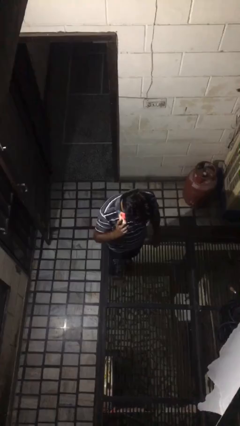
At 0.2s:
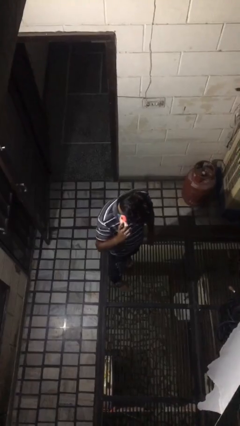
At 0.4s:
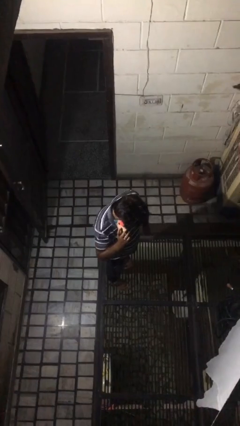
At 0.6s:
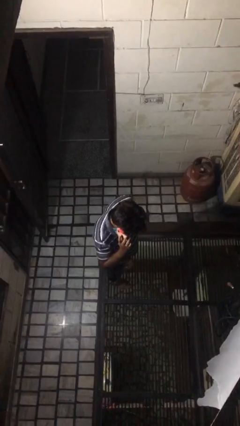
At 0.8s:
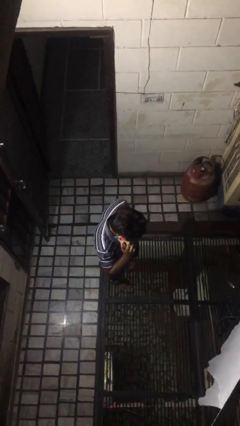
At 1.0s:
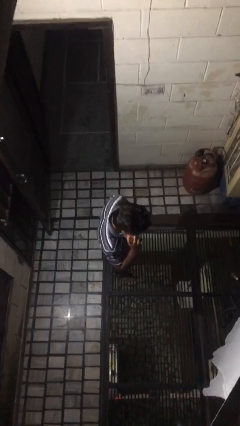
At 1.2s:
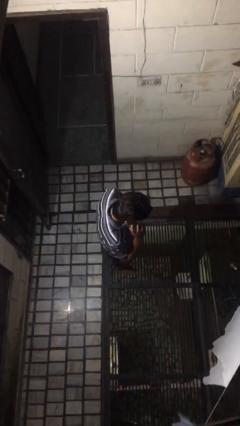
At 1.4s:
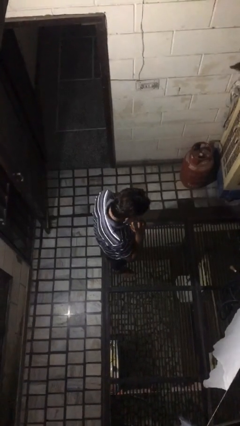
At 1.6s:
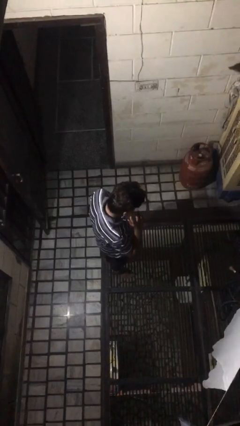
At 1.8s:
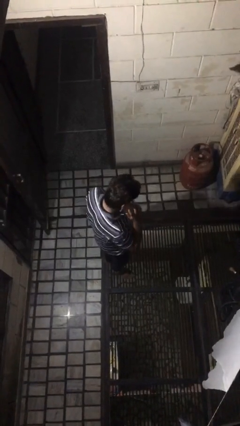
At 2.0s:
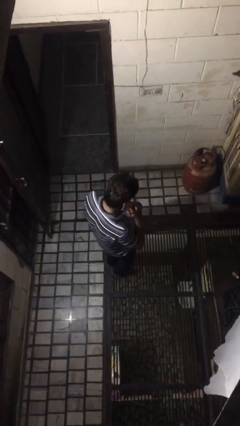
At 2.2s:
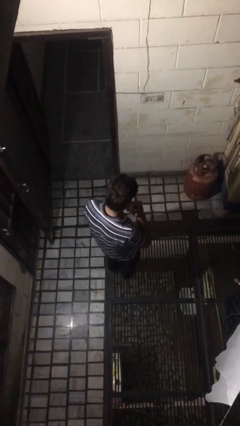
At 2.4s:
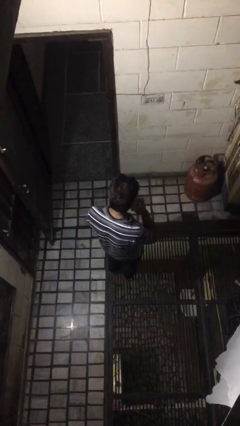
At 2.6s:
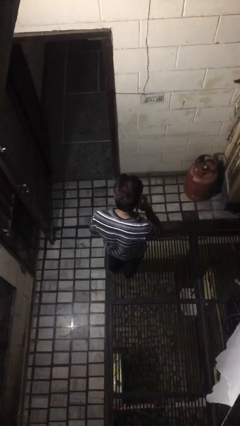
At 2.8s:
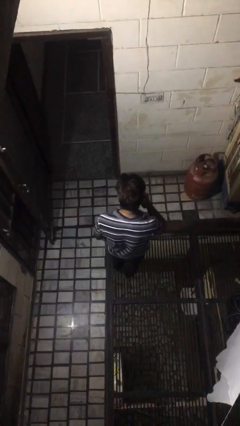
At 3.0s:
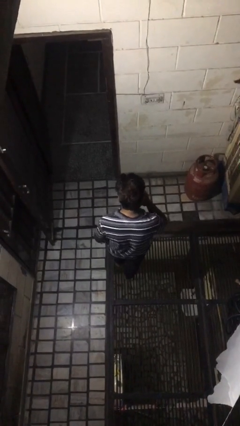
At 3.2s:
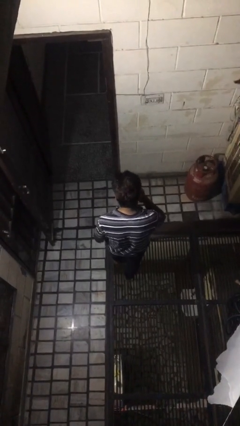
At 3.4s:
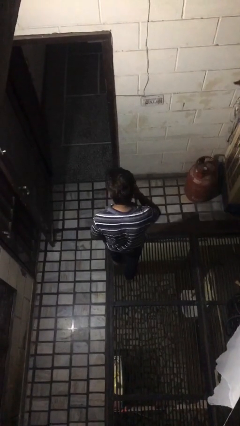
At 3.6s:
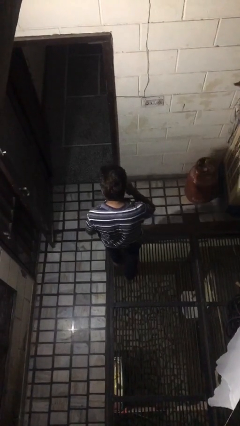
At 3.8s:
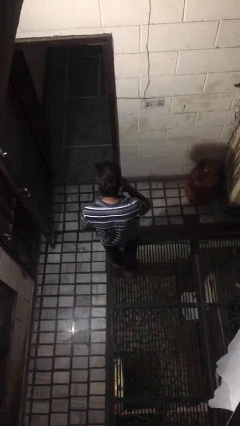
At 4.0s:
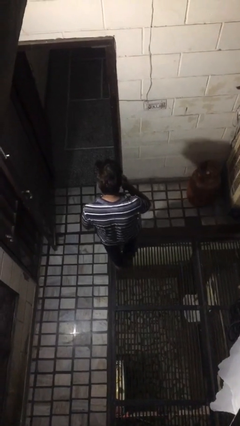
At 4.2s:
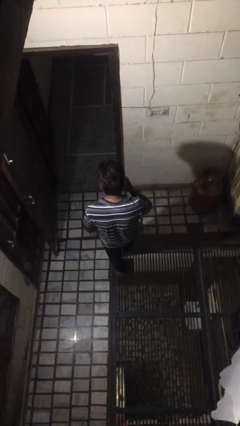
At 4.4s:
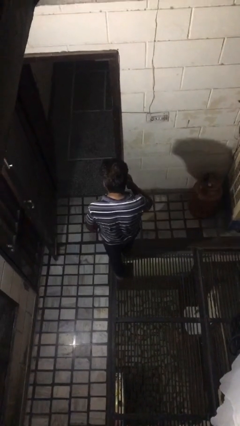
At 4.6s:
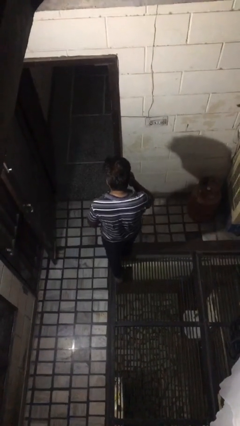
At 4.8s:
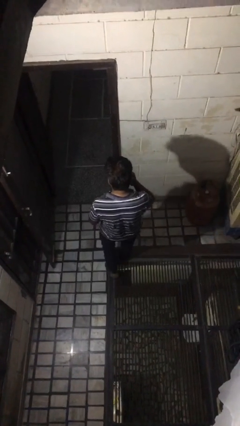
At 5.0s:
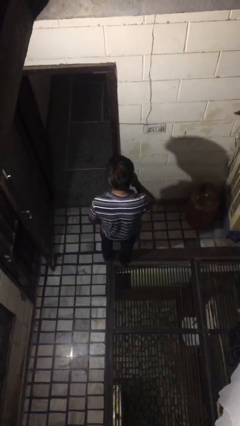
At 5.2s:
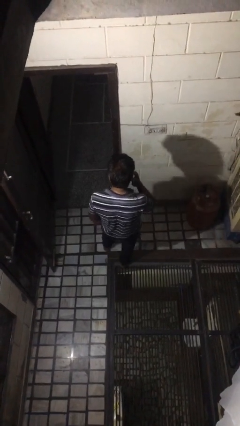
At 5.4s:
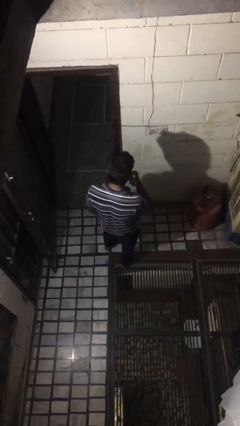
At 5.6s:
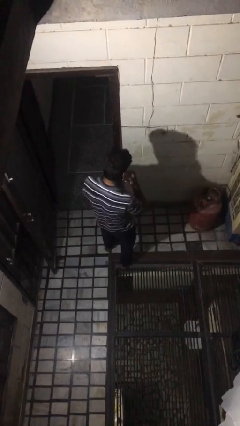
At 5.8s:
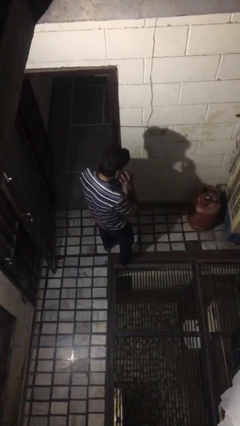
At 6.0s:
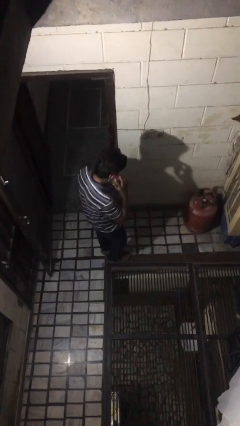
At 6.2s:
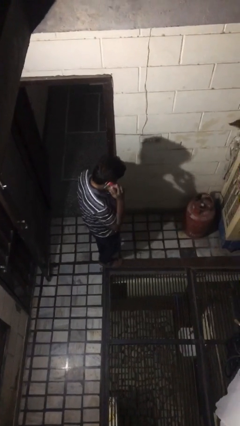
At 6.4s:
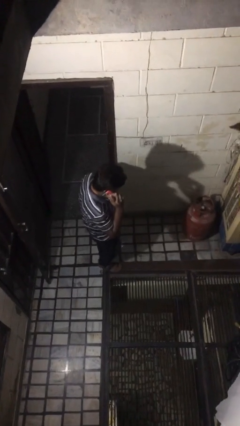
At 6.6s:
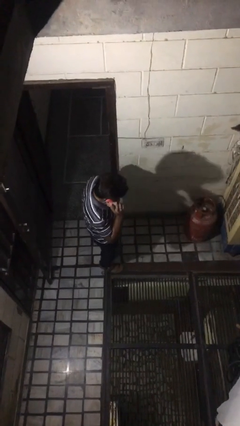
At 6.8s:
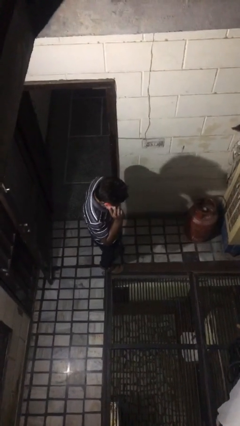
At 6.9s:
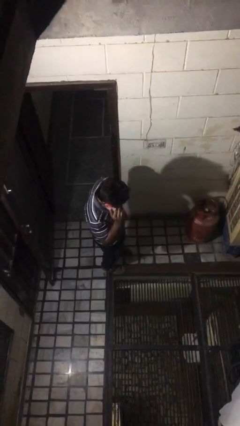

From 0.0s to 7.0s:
person talks on phone

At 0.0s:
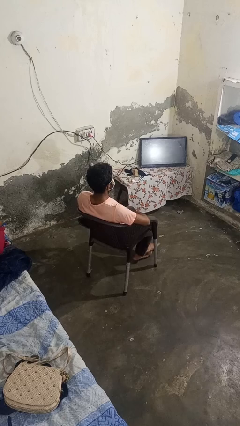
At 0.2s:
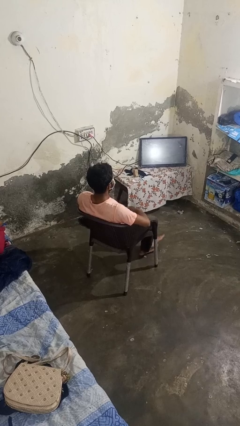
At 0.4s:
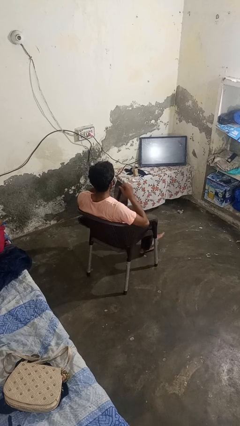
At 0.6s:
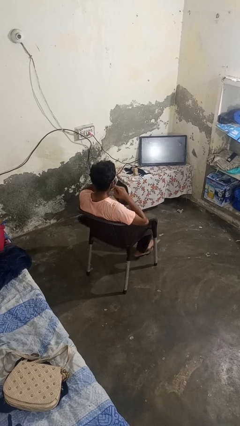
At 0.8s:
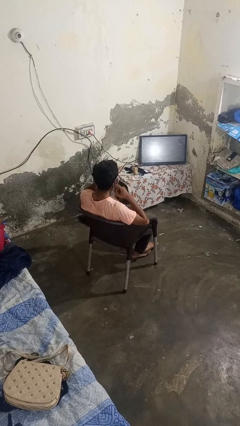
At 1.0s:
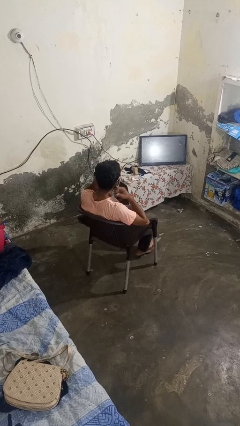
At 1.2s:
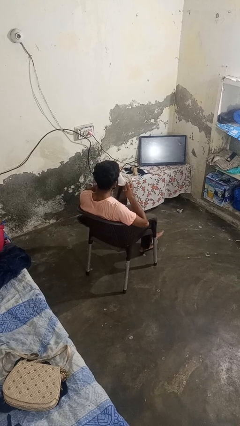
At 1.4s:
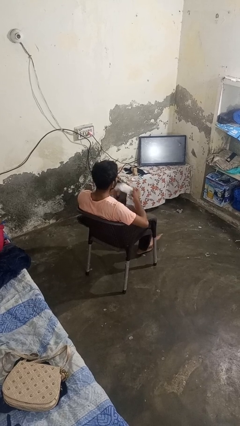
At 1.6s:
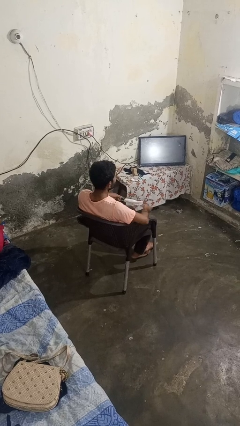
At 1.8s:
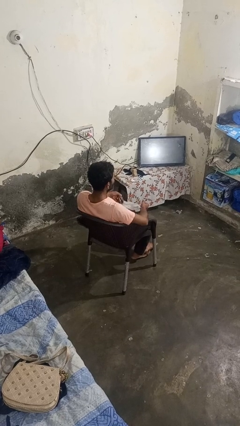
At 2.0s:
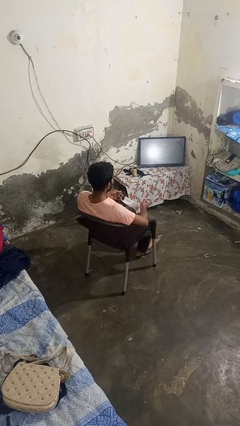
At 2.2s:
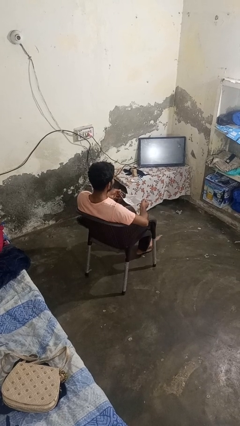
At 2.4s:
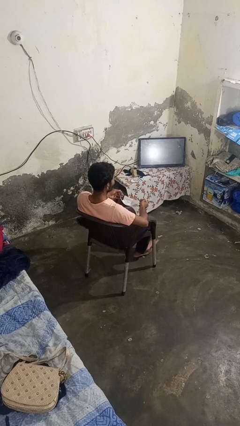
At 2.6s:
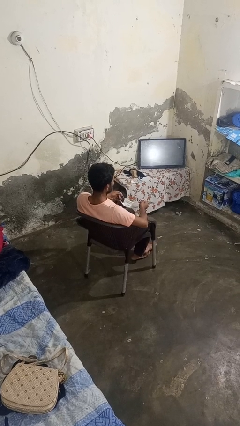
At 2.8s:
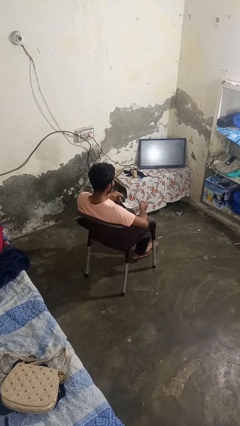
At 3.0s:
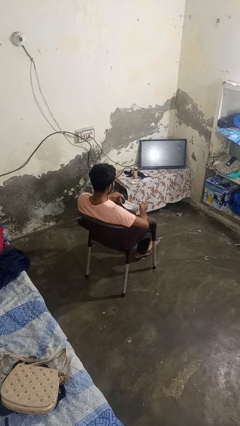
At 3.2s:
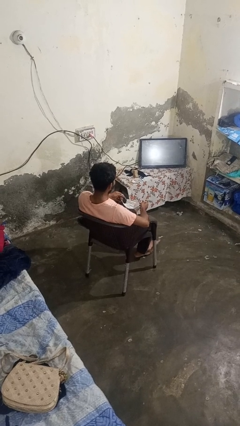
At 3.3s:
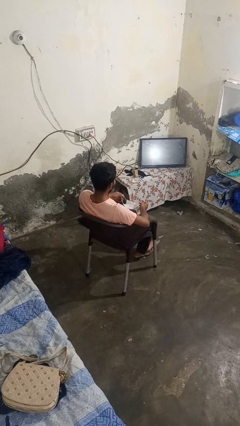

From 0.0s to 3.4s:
person takes off facemask

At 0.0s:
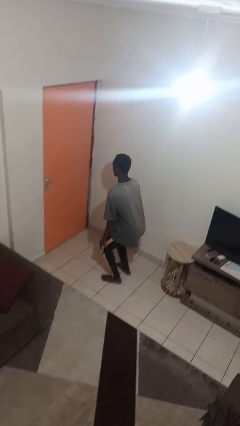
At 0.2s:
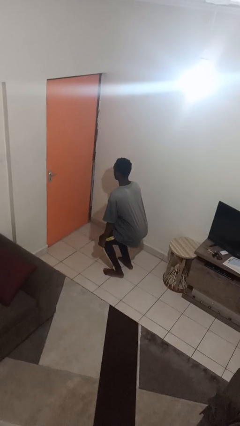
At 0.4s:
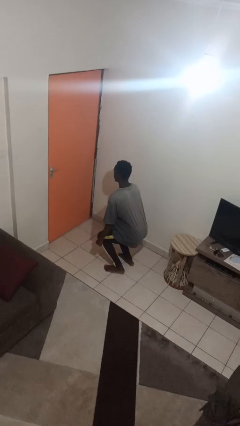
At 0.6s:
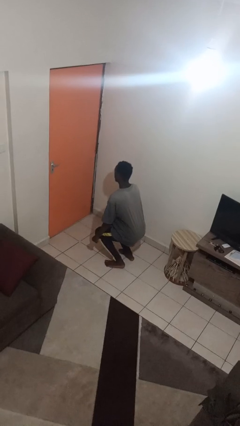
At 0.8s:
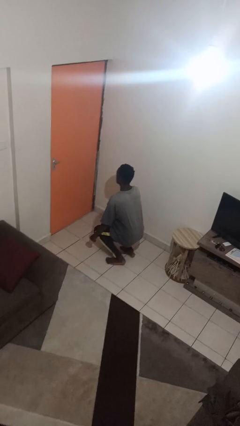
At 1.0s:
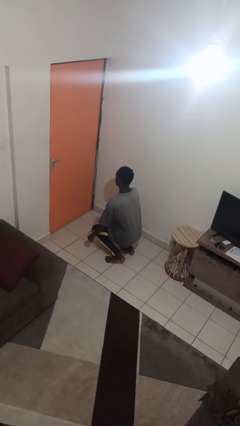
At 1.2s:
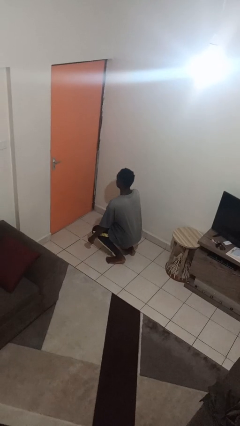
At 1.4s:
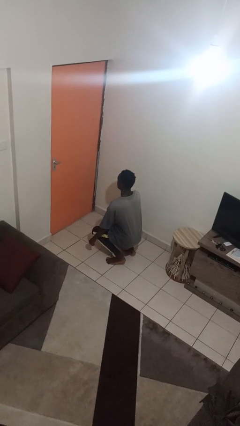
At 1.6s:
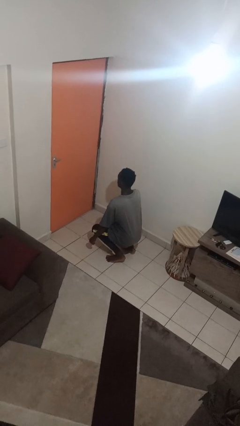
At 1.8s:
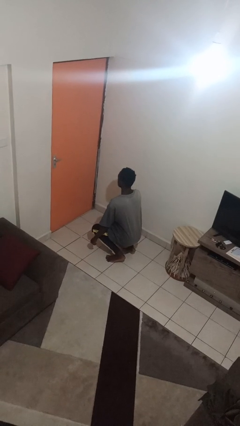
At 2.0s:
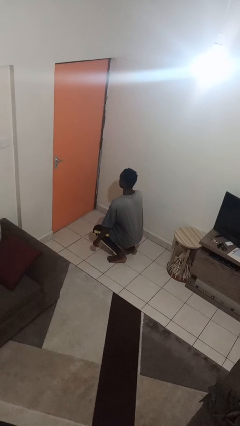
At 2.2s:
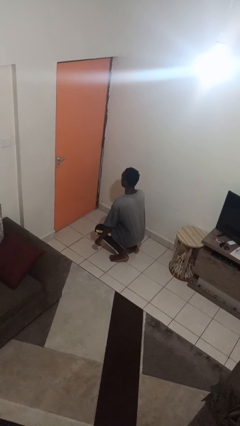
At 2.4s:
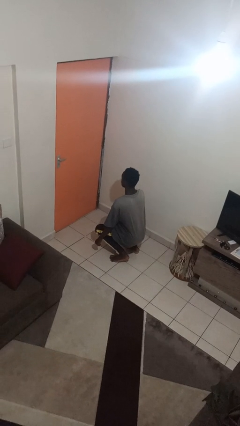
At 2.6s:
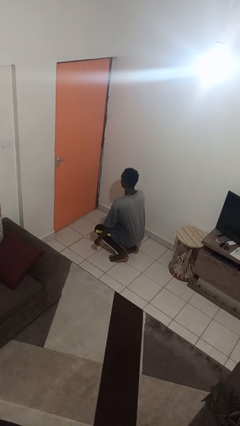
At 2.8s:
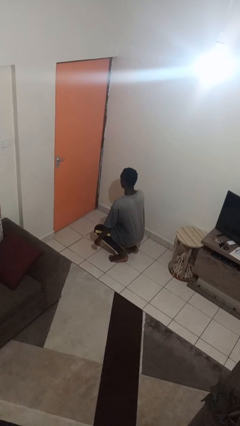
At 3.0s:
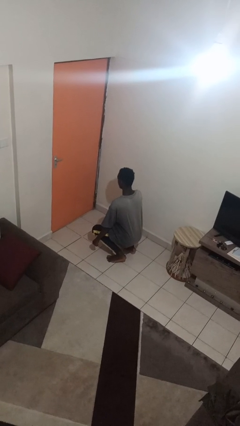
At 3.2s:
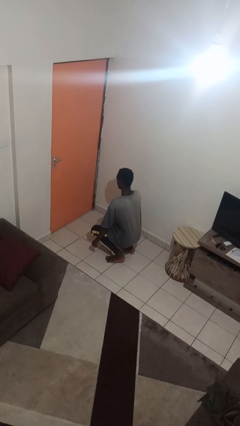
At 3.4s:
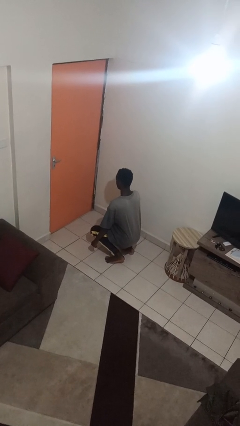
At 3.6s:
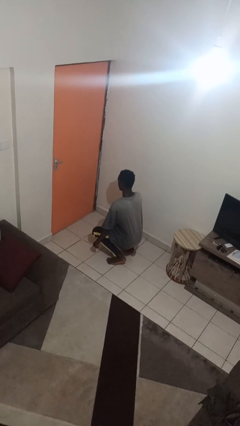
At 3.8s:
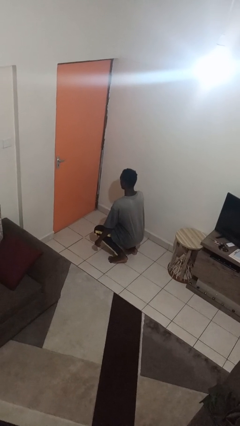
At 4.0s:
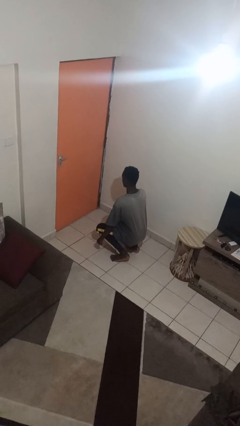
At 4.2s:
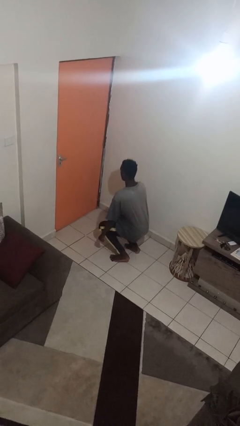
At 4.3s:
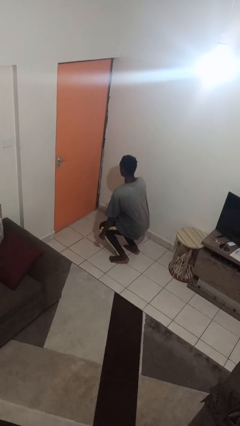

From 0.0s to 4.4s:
person squats

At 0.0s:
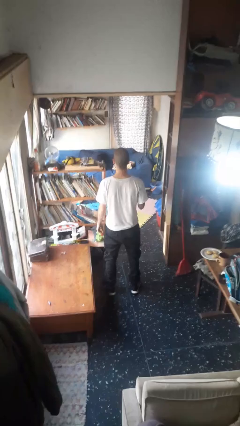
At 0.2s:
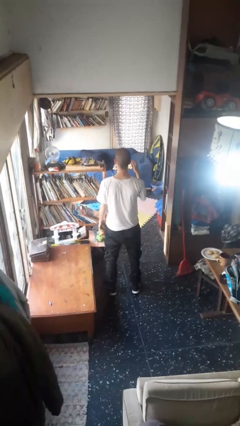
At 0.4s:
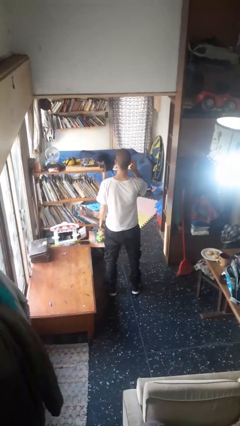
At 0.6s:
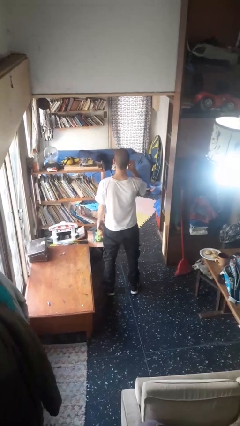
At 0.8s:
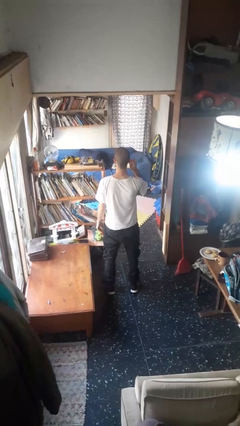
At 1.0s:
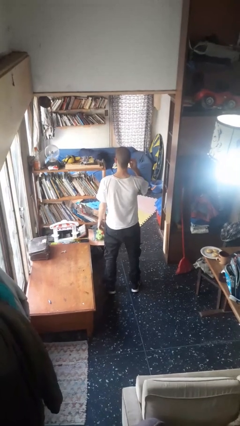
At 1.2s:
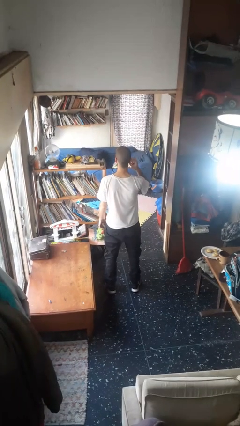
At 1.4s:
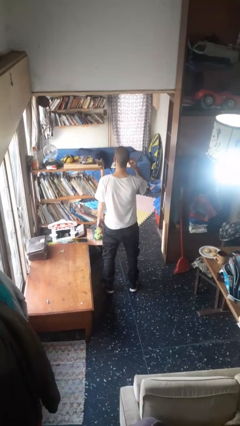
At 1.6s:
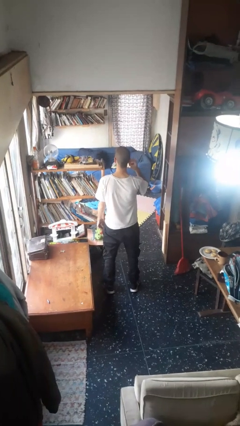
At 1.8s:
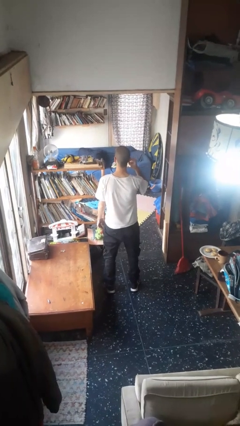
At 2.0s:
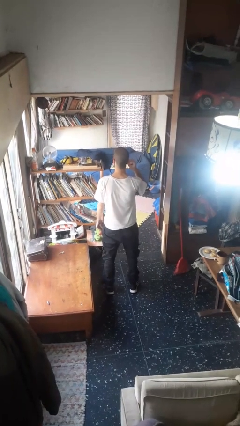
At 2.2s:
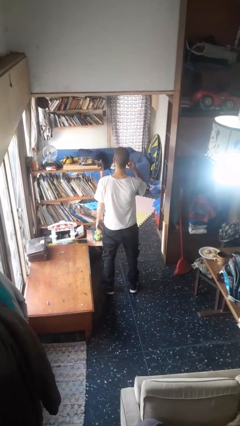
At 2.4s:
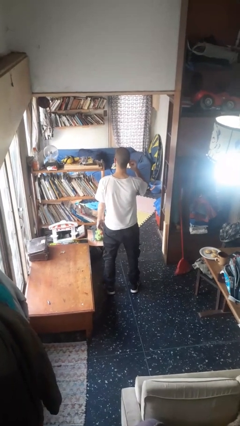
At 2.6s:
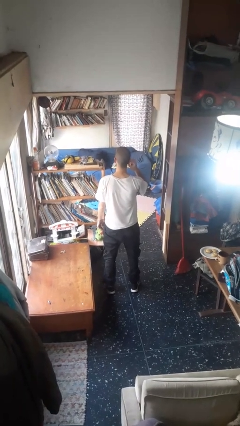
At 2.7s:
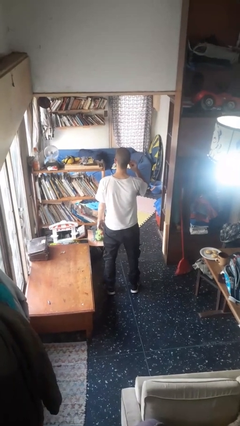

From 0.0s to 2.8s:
person touches earlobe

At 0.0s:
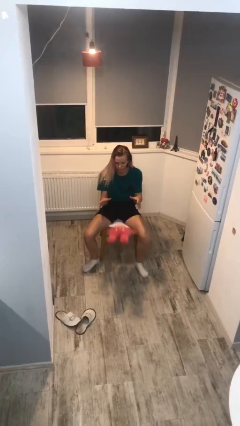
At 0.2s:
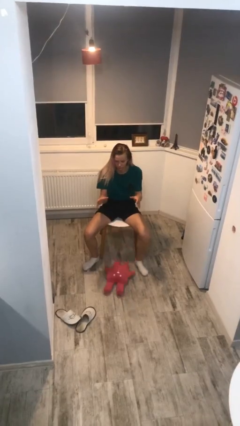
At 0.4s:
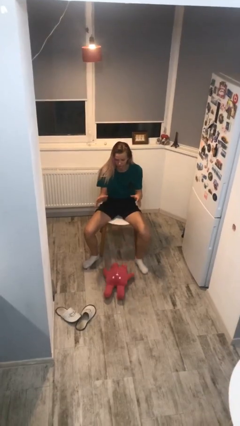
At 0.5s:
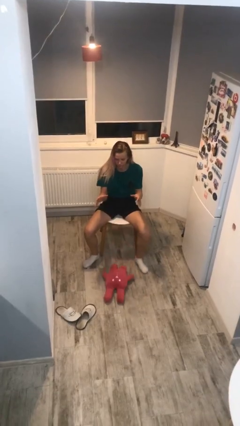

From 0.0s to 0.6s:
person drops object
